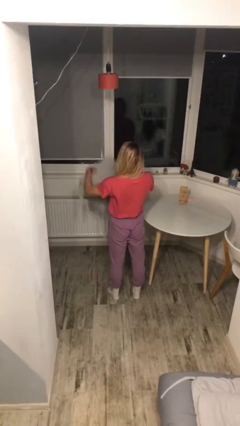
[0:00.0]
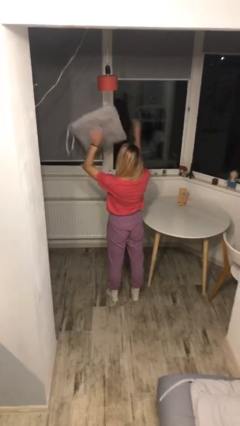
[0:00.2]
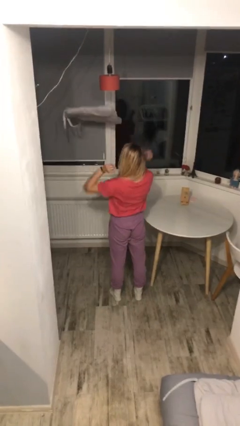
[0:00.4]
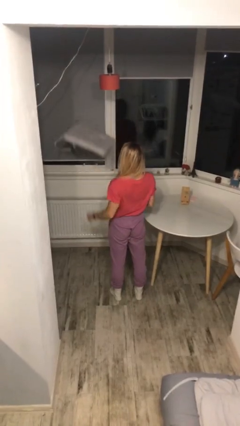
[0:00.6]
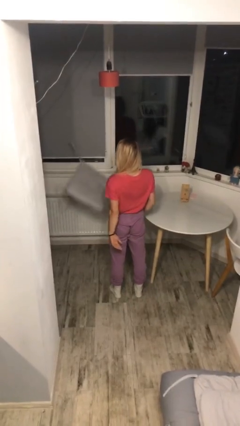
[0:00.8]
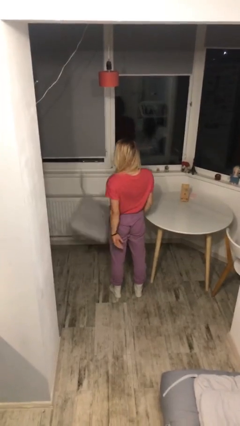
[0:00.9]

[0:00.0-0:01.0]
person throws object into air

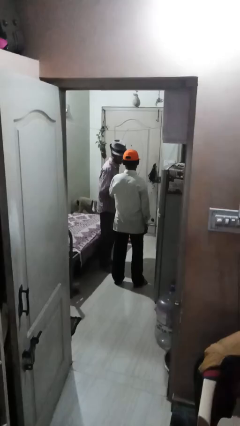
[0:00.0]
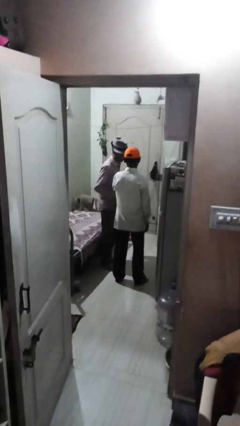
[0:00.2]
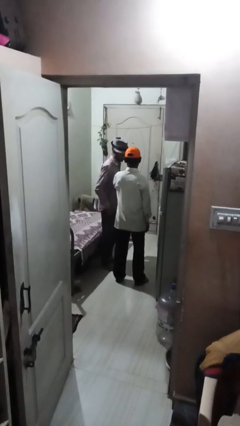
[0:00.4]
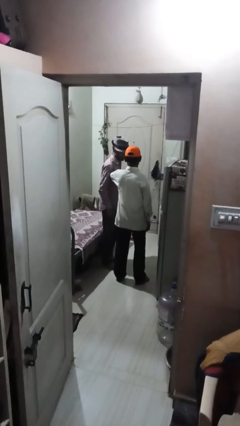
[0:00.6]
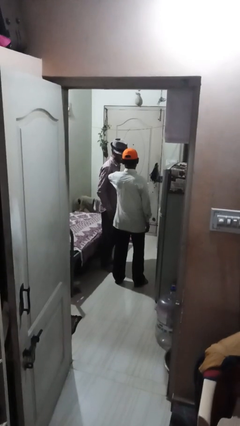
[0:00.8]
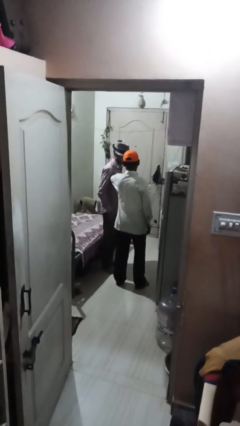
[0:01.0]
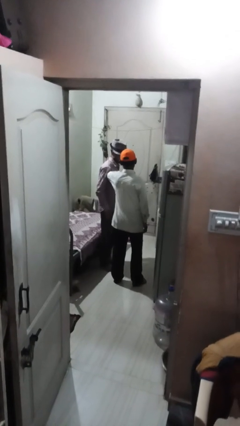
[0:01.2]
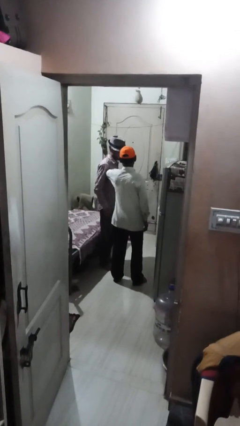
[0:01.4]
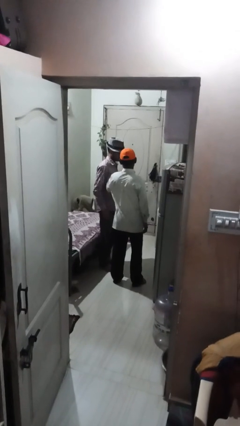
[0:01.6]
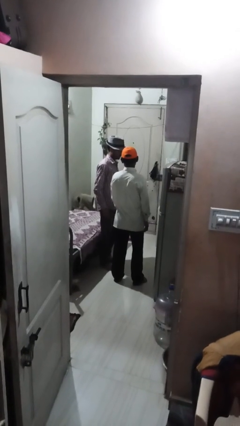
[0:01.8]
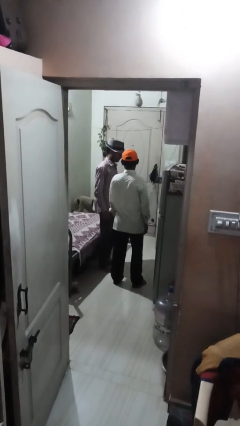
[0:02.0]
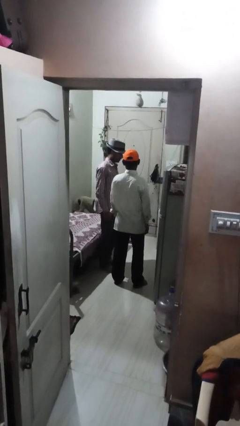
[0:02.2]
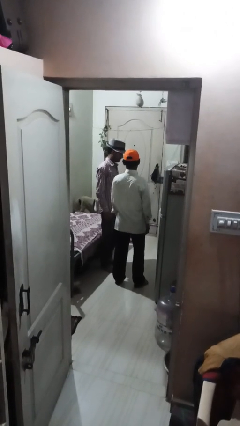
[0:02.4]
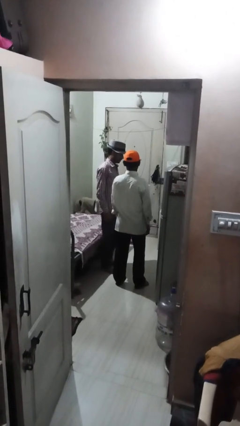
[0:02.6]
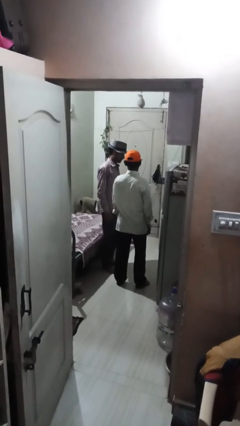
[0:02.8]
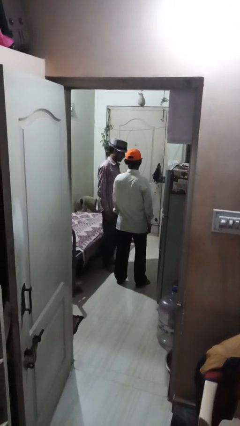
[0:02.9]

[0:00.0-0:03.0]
person nudges person with elbow

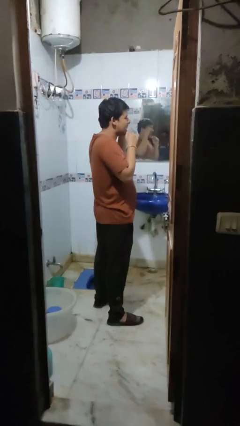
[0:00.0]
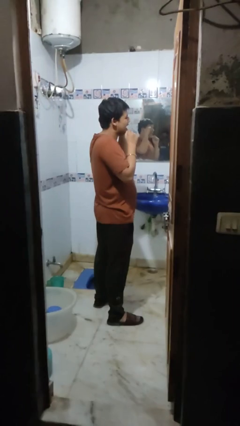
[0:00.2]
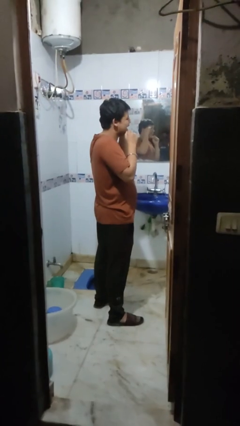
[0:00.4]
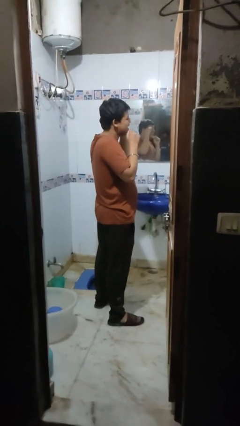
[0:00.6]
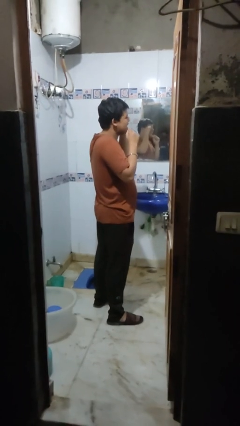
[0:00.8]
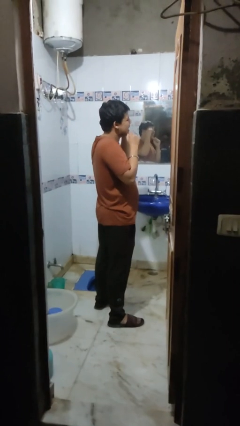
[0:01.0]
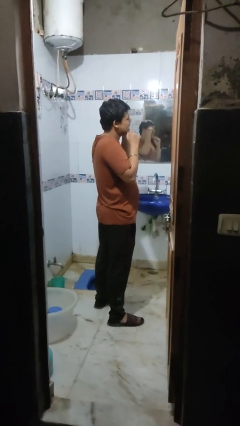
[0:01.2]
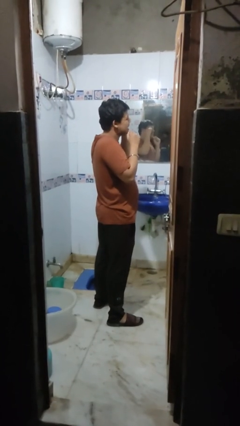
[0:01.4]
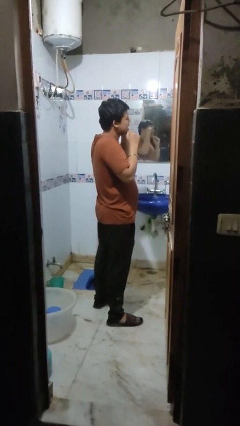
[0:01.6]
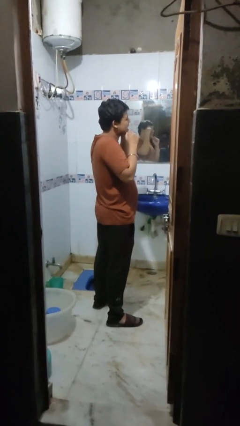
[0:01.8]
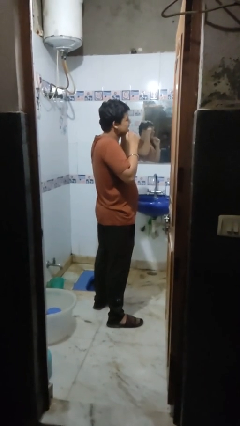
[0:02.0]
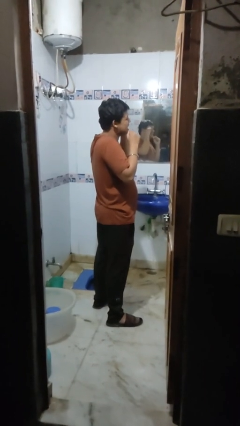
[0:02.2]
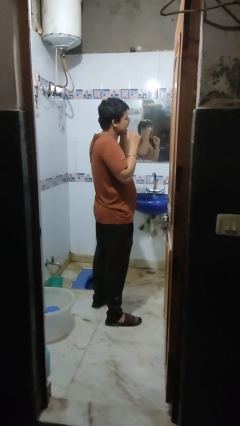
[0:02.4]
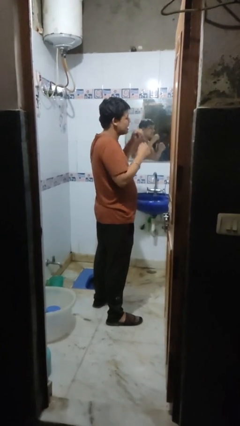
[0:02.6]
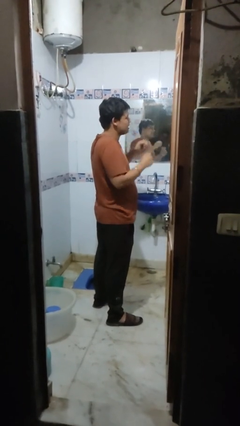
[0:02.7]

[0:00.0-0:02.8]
person flosses

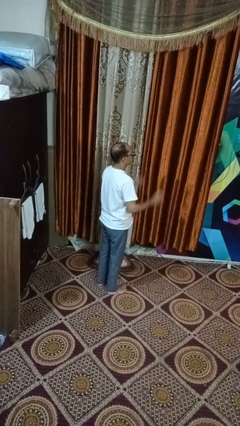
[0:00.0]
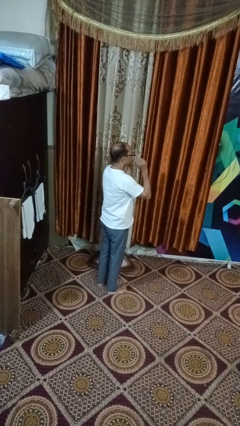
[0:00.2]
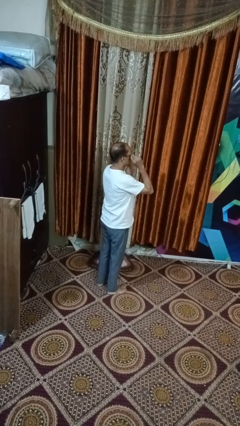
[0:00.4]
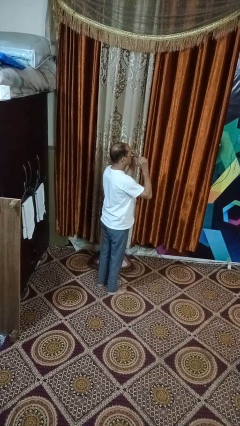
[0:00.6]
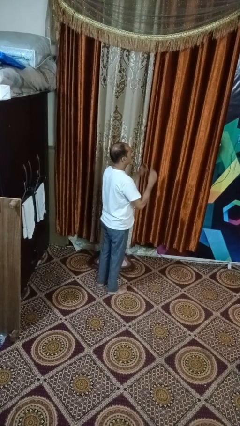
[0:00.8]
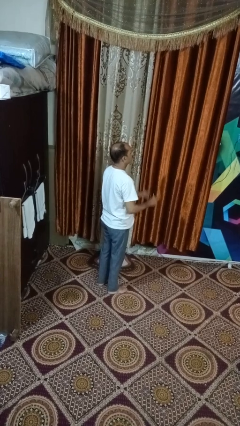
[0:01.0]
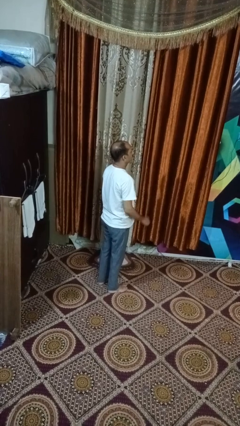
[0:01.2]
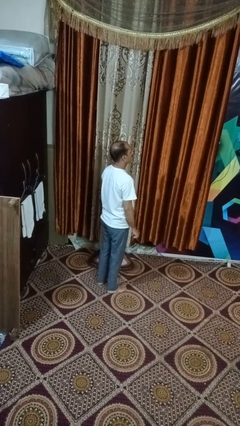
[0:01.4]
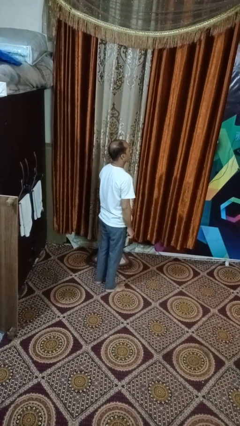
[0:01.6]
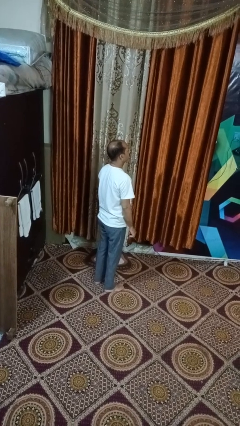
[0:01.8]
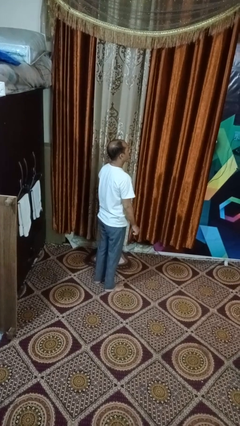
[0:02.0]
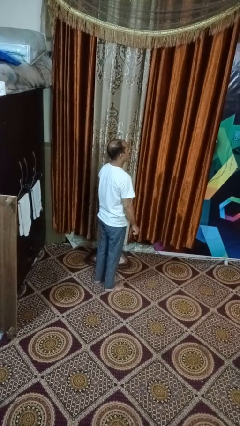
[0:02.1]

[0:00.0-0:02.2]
person takes off glasses

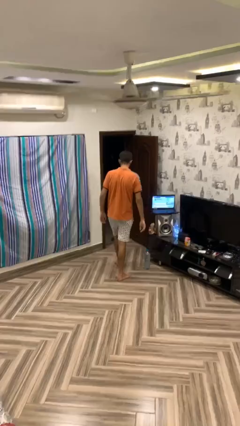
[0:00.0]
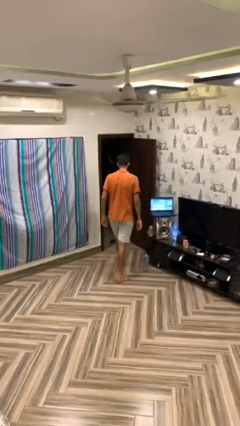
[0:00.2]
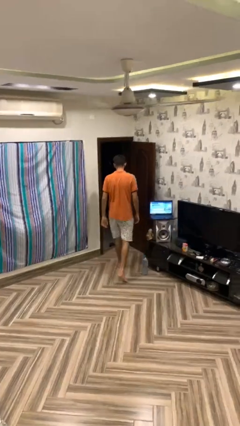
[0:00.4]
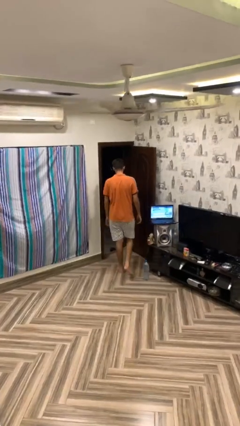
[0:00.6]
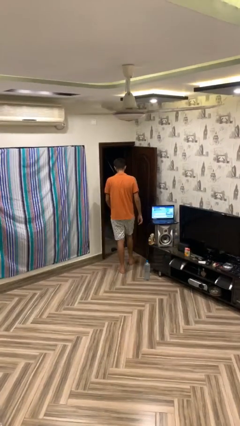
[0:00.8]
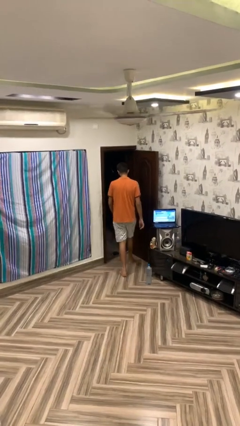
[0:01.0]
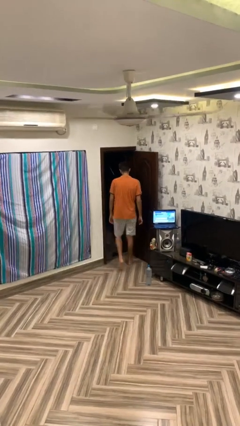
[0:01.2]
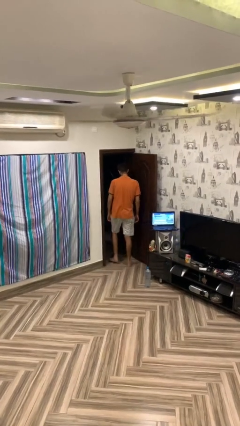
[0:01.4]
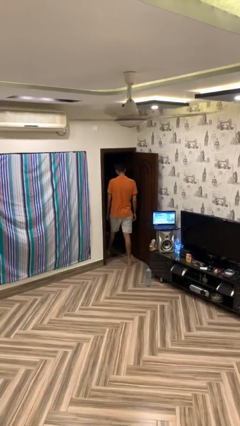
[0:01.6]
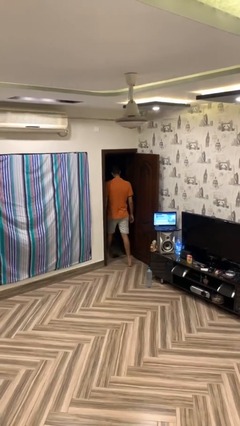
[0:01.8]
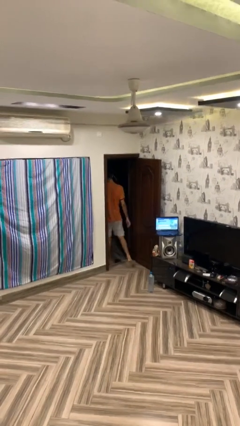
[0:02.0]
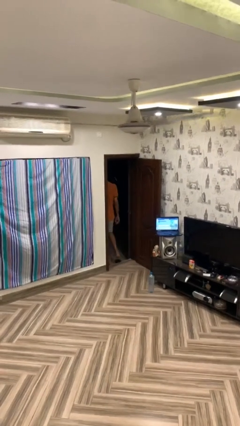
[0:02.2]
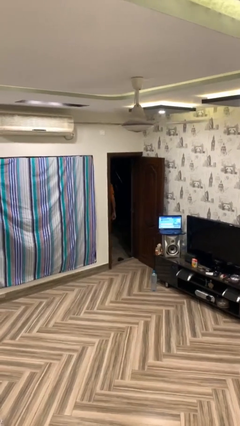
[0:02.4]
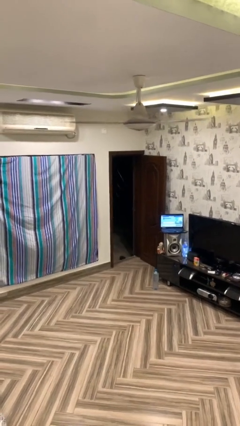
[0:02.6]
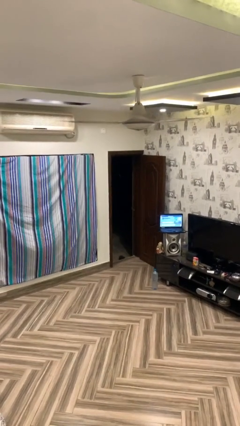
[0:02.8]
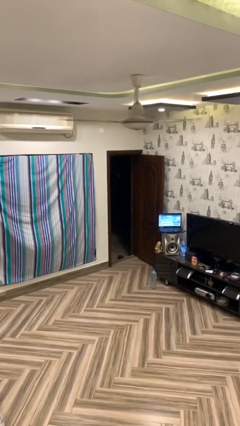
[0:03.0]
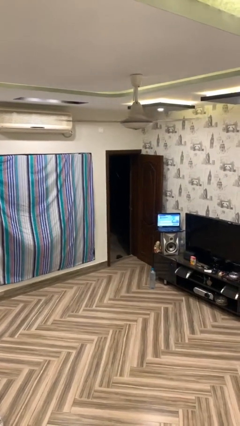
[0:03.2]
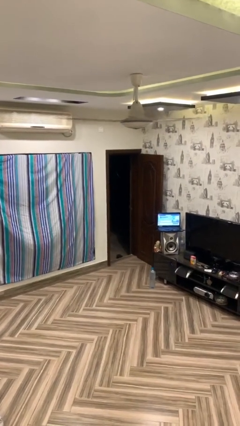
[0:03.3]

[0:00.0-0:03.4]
person exits scene through structure

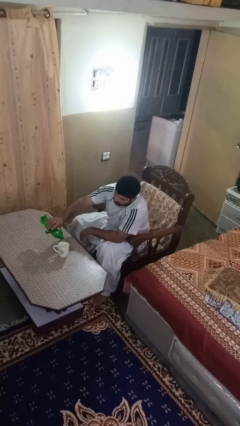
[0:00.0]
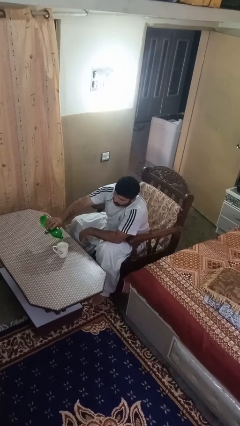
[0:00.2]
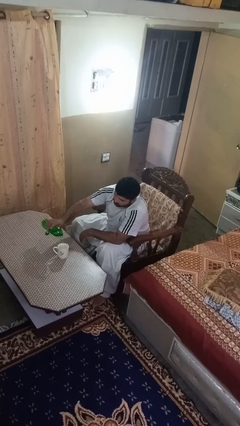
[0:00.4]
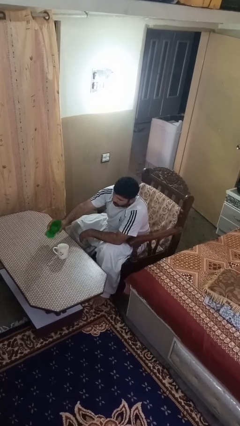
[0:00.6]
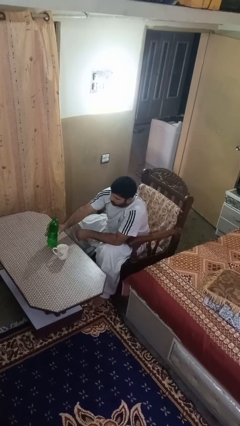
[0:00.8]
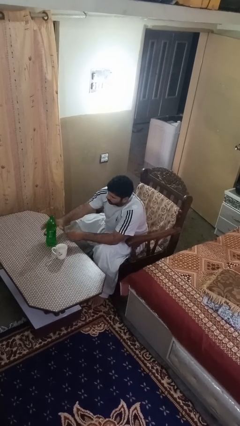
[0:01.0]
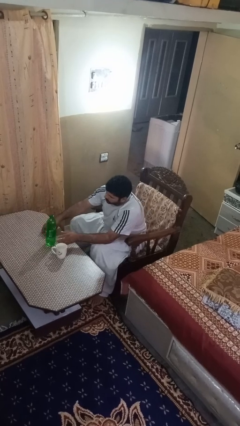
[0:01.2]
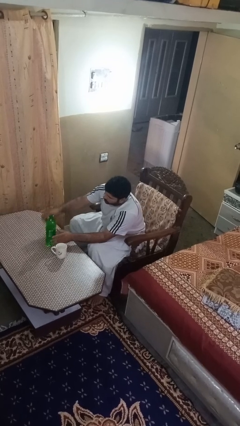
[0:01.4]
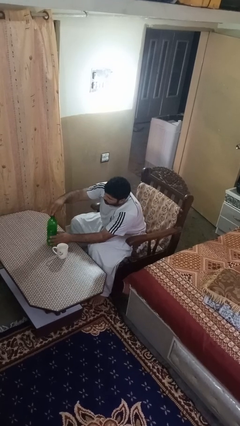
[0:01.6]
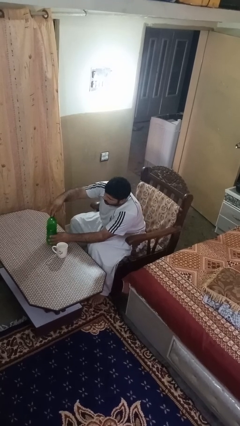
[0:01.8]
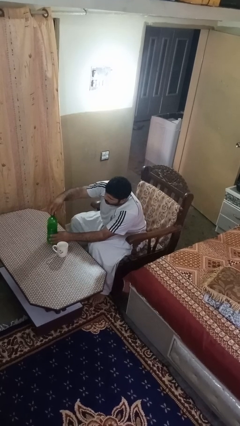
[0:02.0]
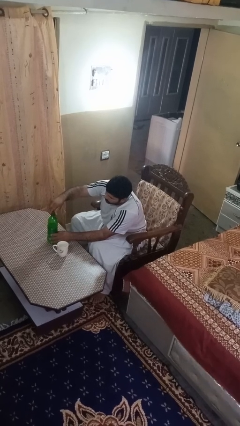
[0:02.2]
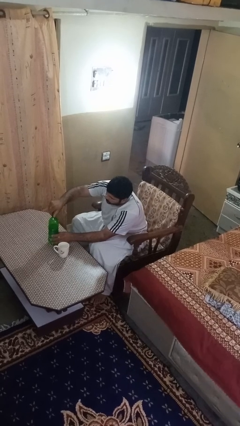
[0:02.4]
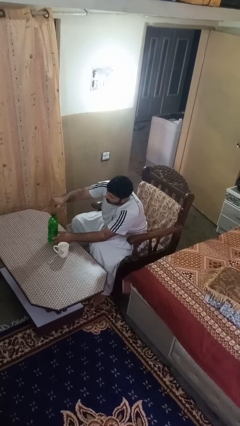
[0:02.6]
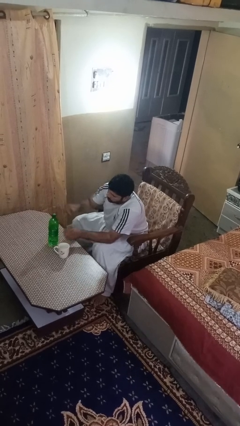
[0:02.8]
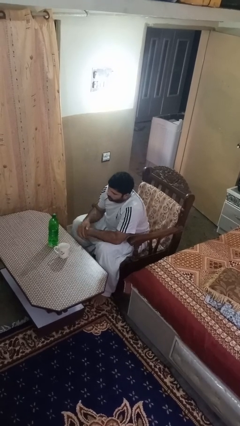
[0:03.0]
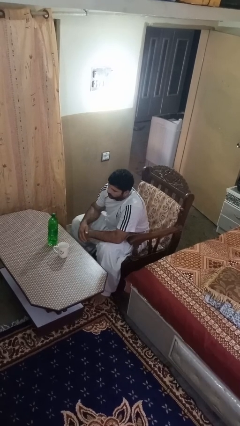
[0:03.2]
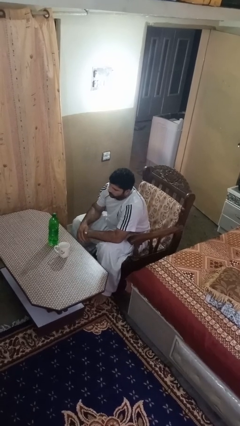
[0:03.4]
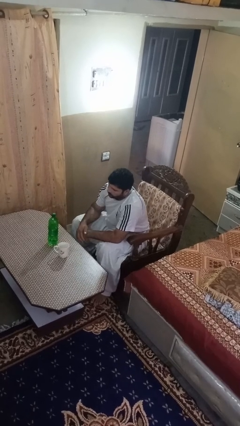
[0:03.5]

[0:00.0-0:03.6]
person screws lid to bottle

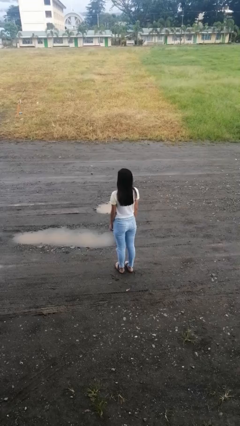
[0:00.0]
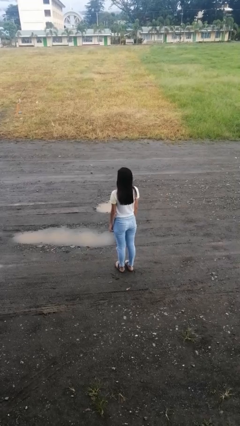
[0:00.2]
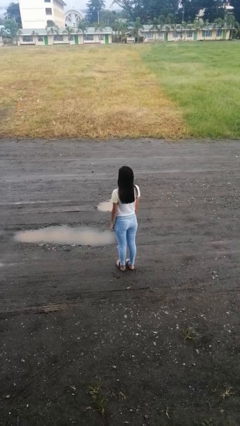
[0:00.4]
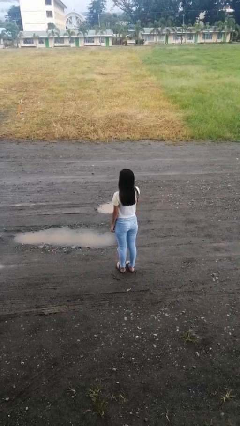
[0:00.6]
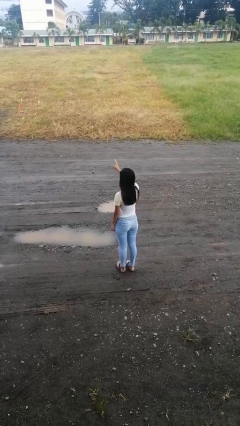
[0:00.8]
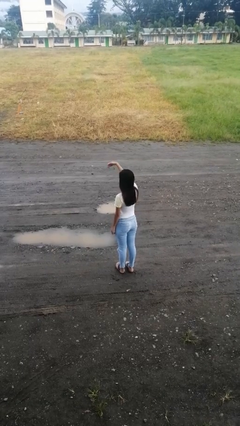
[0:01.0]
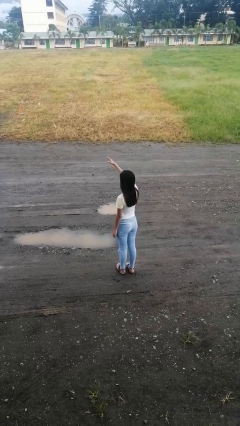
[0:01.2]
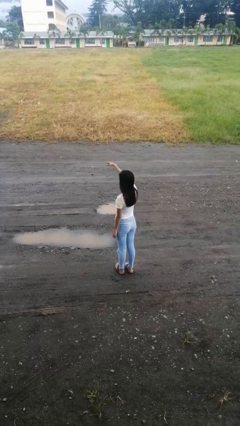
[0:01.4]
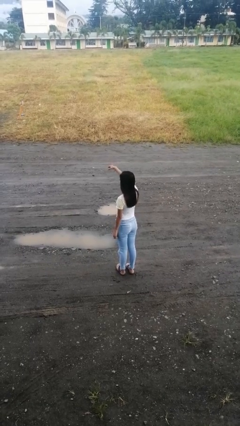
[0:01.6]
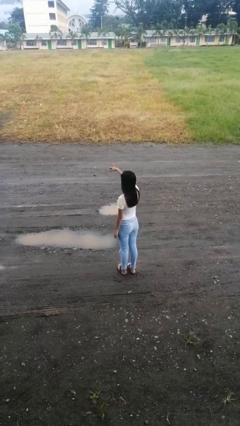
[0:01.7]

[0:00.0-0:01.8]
person gestures come here
